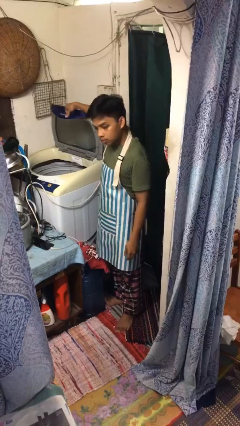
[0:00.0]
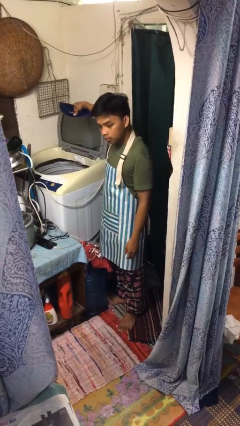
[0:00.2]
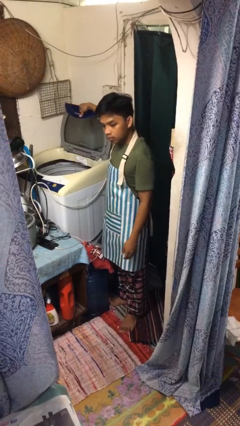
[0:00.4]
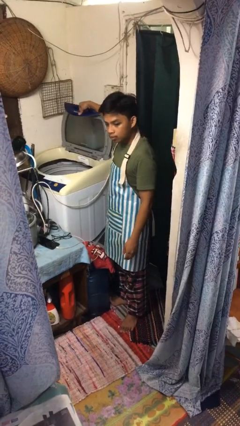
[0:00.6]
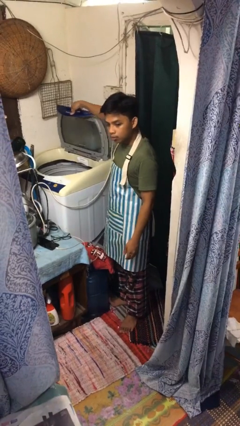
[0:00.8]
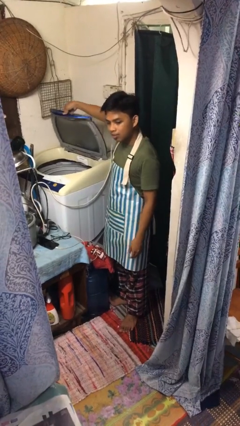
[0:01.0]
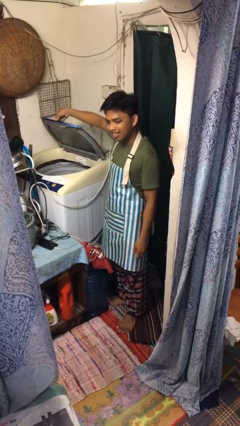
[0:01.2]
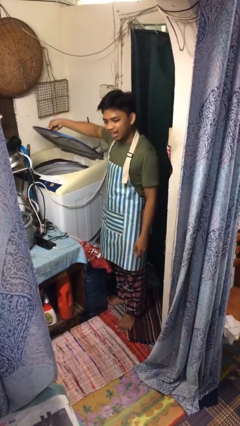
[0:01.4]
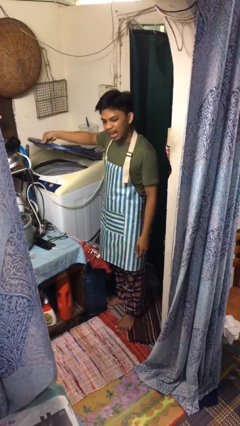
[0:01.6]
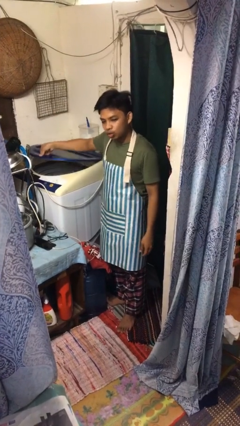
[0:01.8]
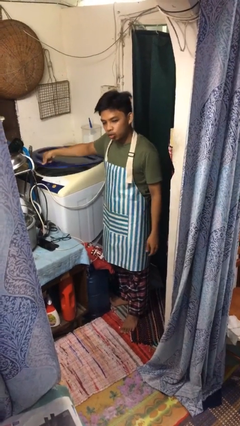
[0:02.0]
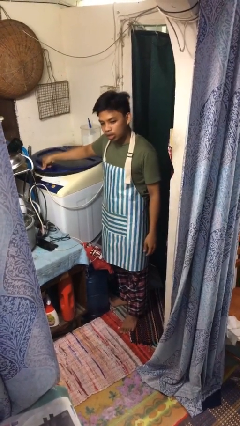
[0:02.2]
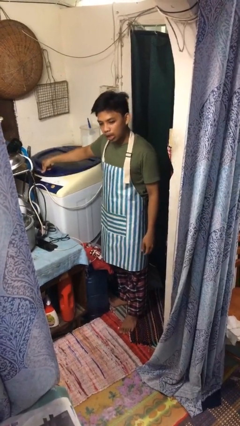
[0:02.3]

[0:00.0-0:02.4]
person closes clothes washer

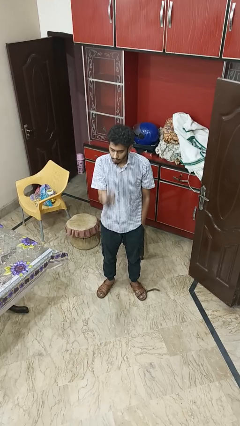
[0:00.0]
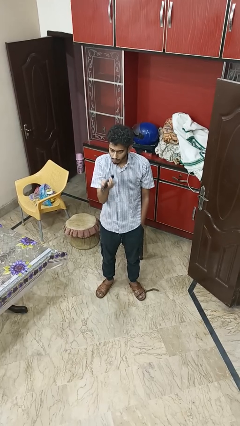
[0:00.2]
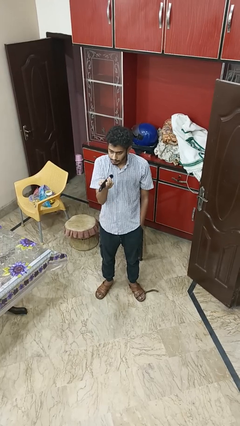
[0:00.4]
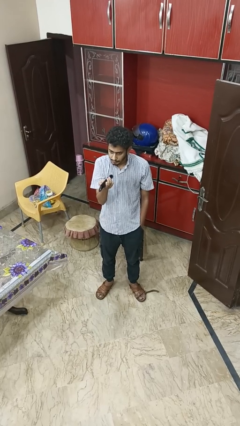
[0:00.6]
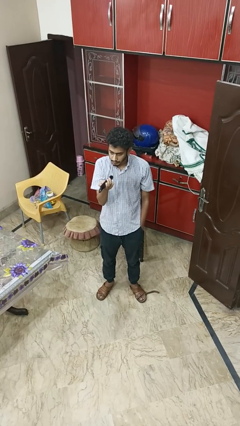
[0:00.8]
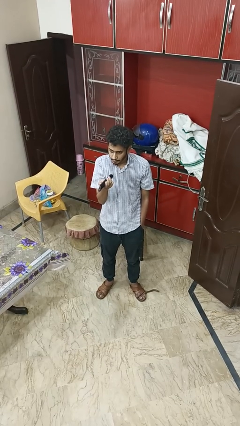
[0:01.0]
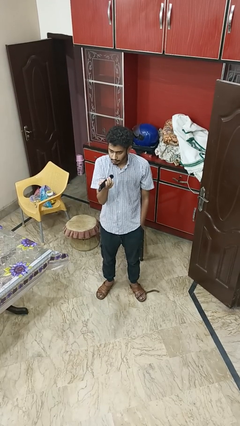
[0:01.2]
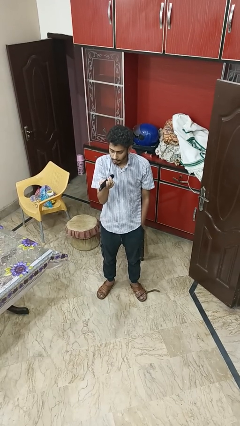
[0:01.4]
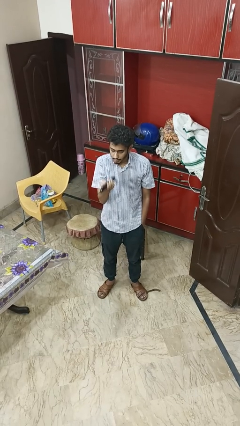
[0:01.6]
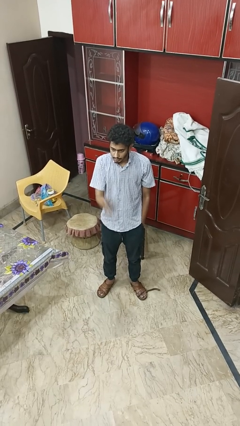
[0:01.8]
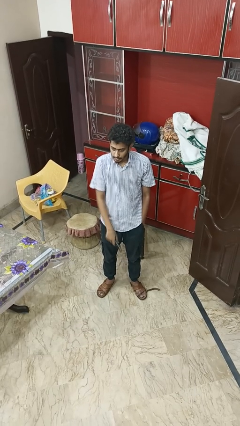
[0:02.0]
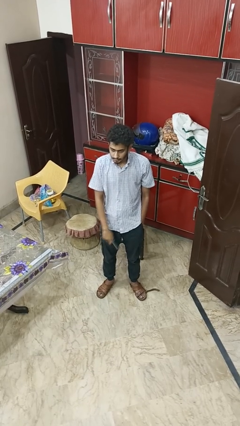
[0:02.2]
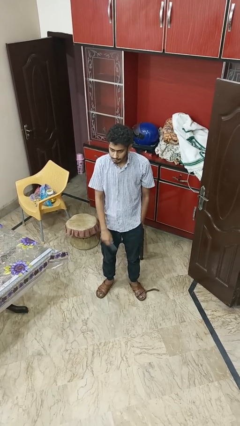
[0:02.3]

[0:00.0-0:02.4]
person uses television remote

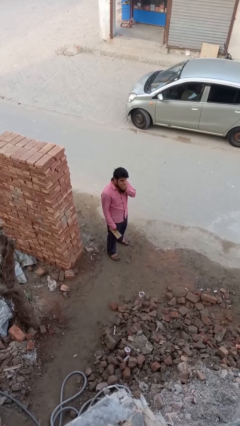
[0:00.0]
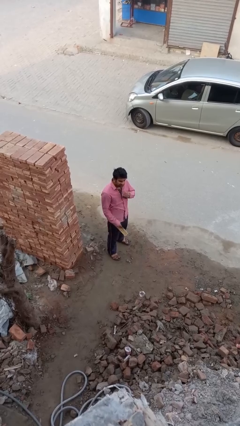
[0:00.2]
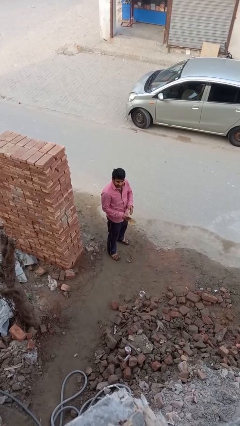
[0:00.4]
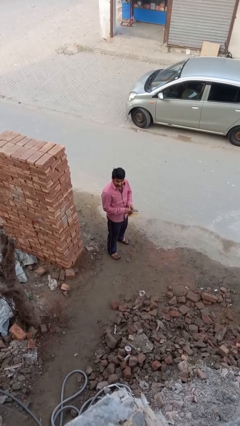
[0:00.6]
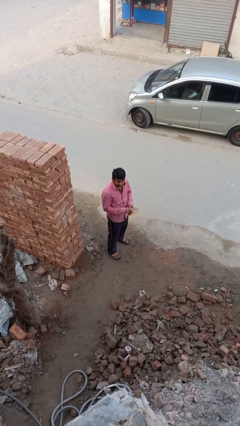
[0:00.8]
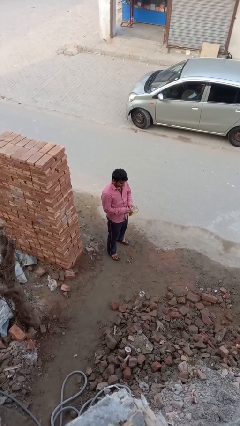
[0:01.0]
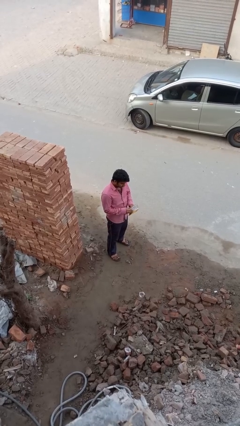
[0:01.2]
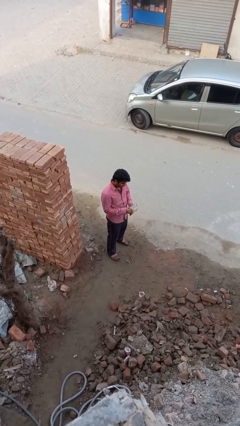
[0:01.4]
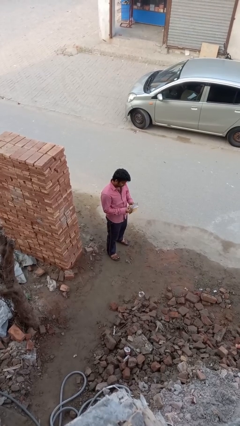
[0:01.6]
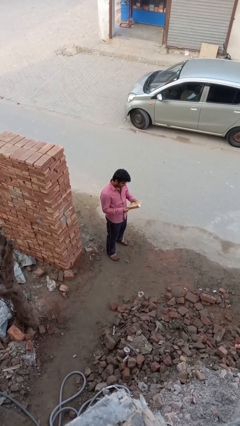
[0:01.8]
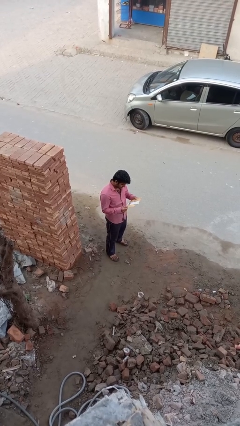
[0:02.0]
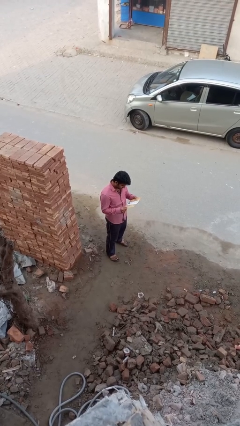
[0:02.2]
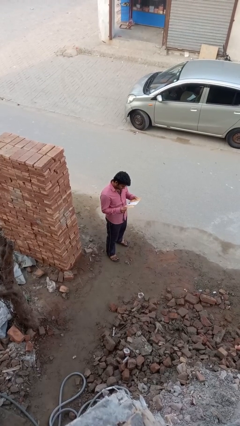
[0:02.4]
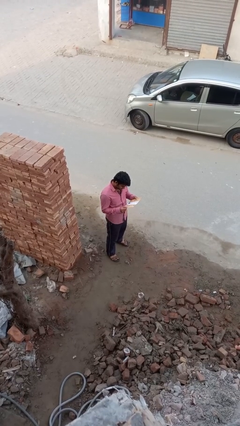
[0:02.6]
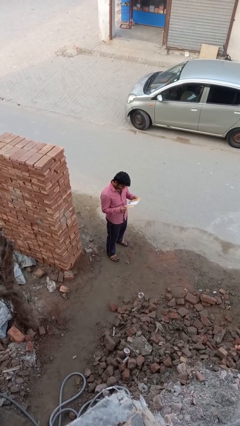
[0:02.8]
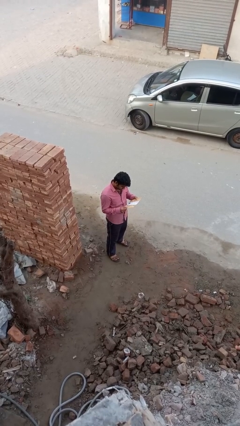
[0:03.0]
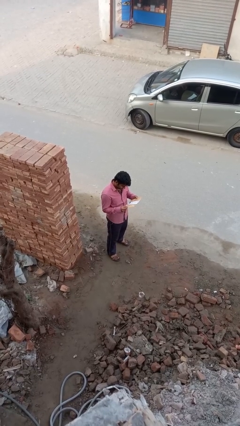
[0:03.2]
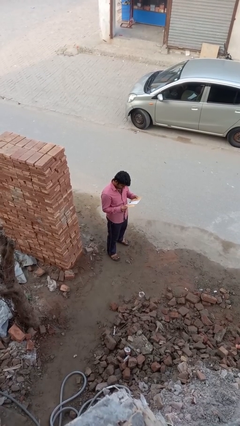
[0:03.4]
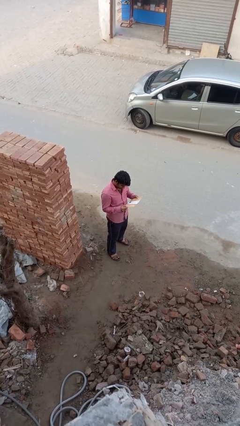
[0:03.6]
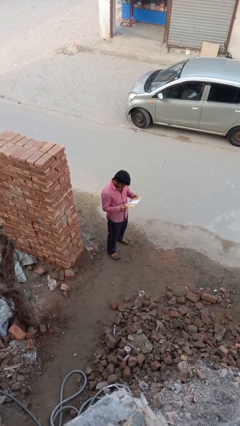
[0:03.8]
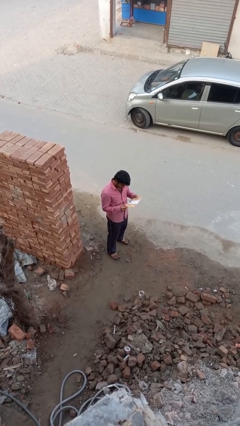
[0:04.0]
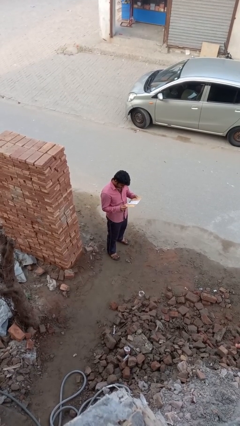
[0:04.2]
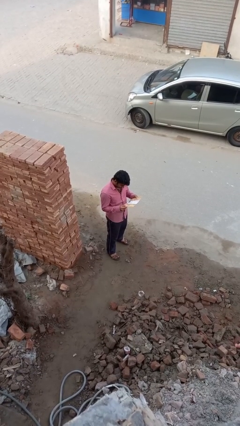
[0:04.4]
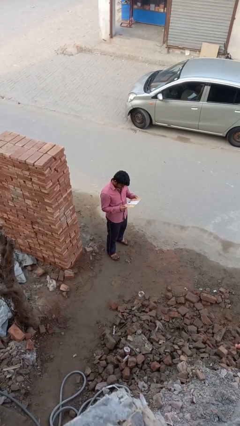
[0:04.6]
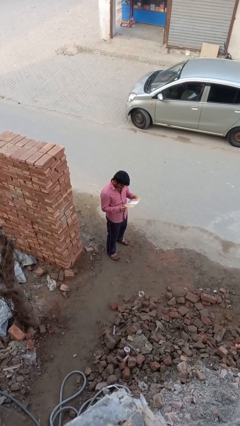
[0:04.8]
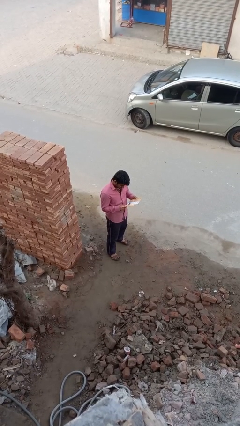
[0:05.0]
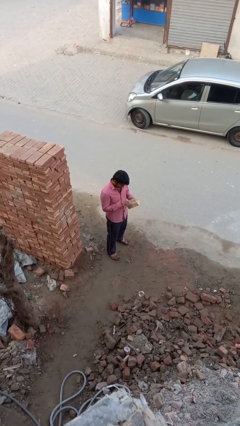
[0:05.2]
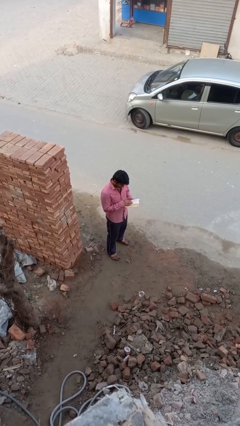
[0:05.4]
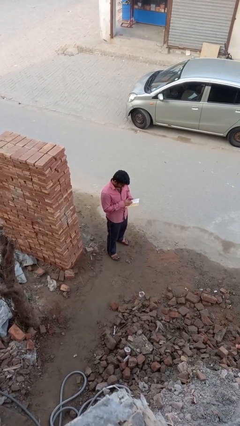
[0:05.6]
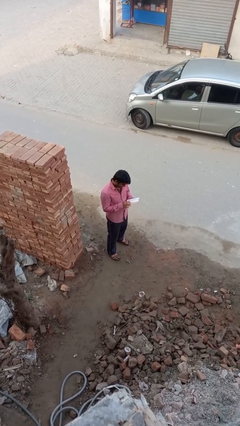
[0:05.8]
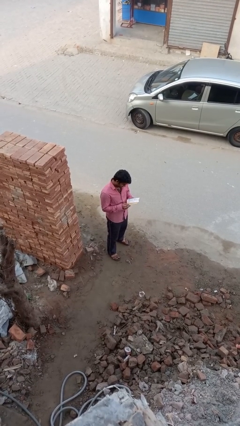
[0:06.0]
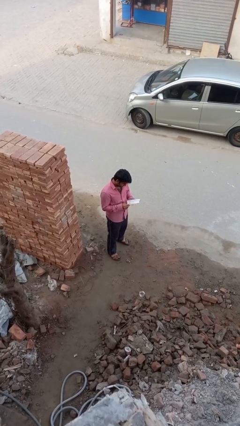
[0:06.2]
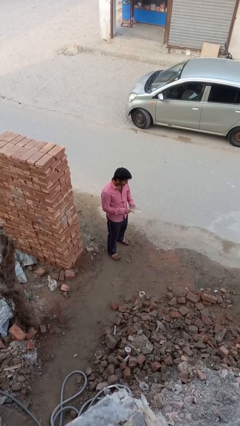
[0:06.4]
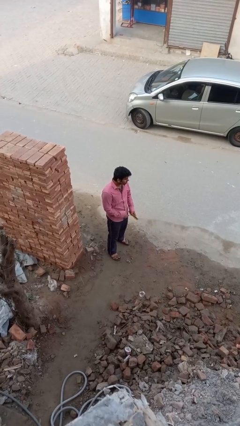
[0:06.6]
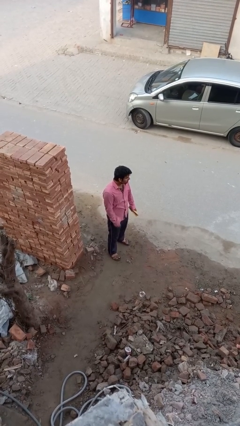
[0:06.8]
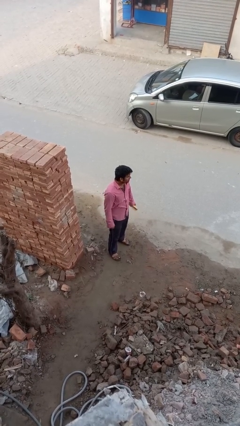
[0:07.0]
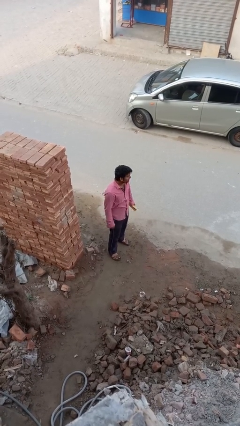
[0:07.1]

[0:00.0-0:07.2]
person reads document

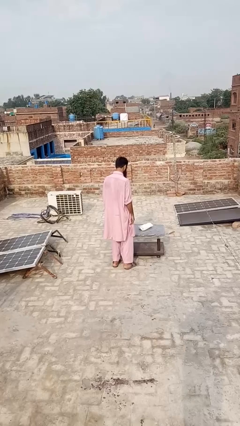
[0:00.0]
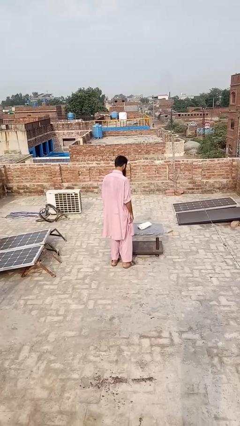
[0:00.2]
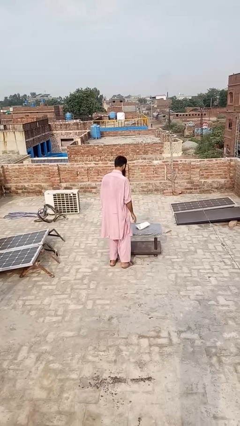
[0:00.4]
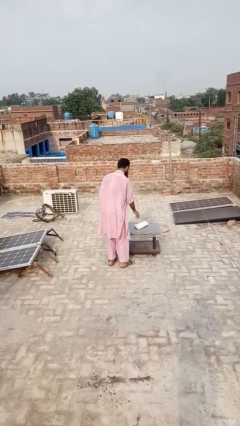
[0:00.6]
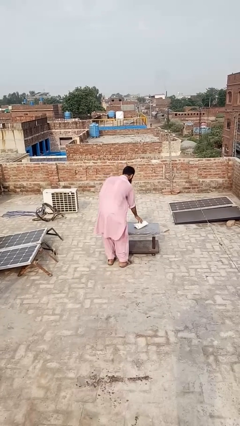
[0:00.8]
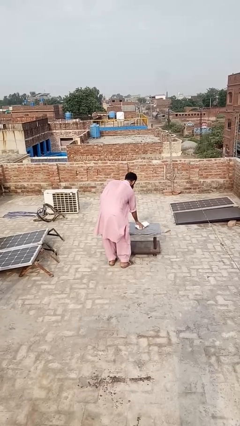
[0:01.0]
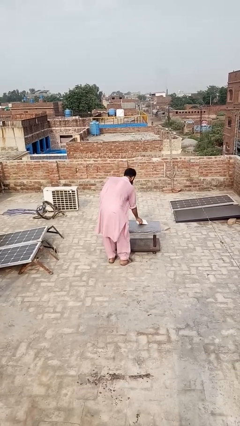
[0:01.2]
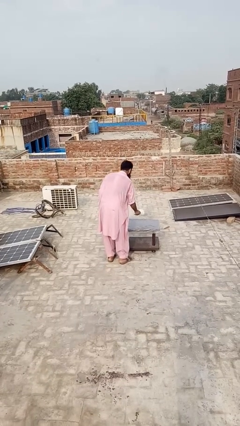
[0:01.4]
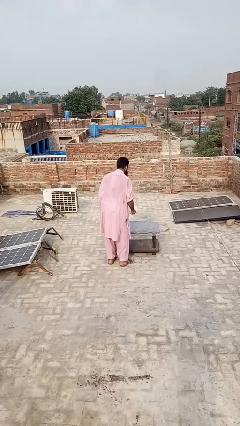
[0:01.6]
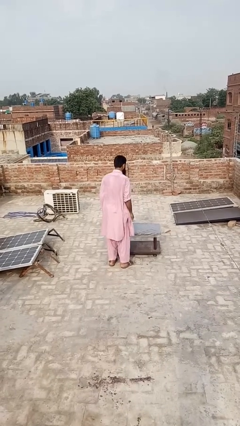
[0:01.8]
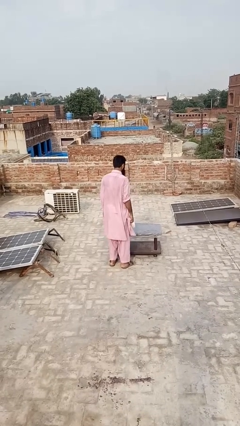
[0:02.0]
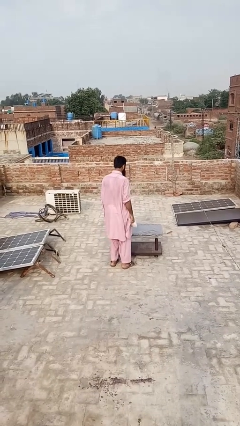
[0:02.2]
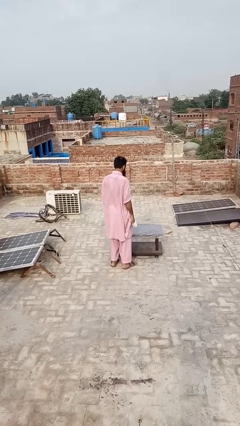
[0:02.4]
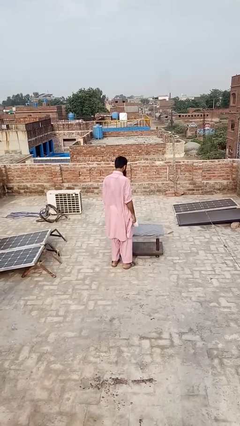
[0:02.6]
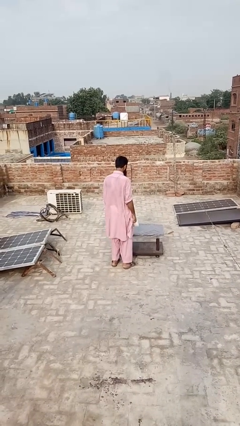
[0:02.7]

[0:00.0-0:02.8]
person picks up object from table

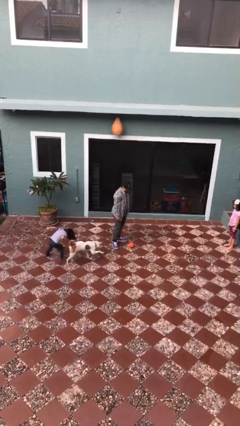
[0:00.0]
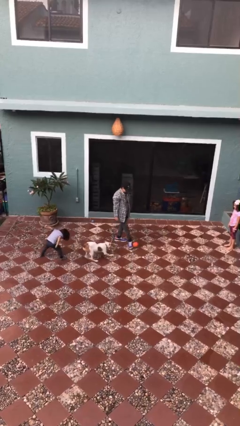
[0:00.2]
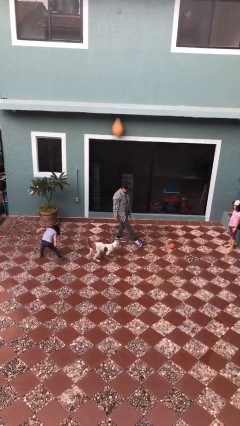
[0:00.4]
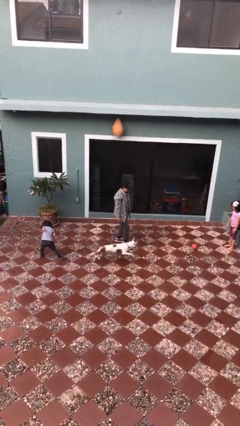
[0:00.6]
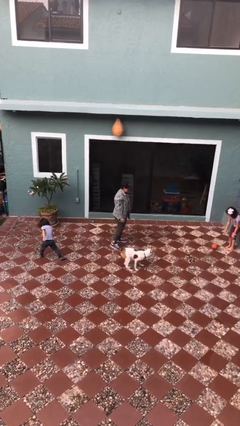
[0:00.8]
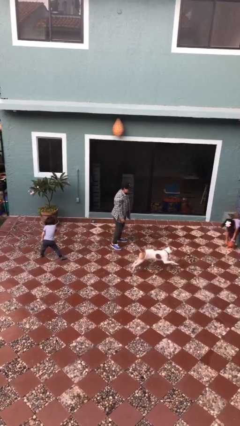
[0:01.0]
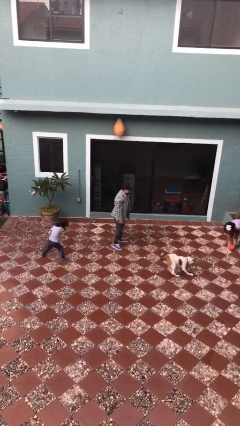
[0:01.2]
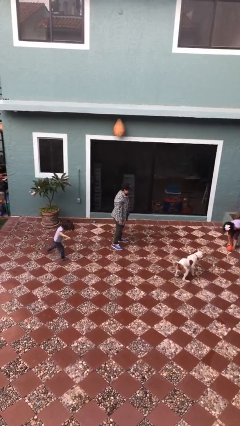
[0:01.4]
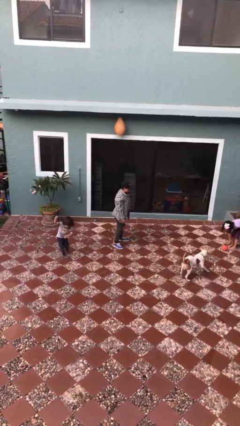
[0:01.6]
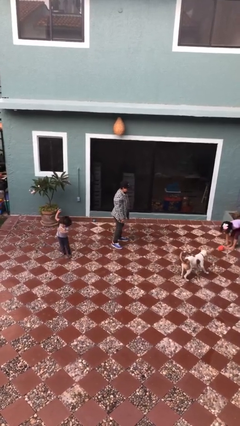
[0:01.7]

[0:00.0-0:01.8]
person kicks object to person

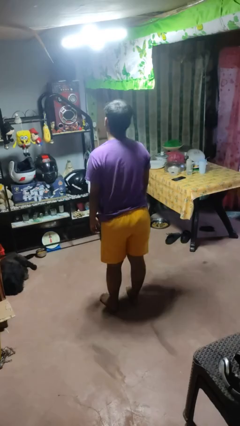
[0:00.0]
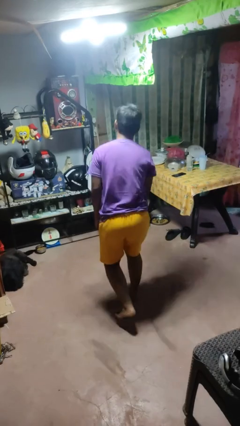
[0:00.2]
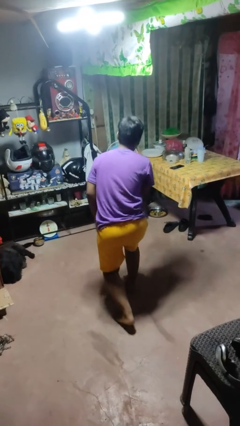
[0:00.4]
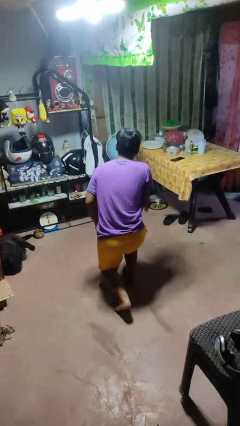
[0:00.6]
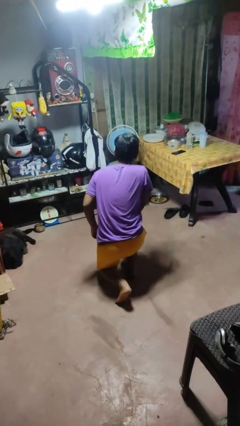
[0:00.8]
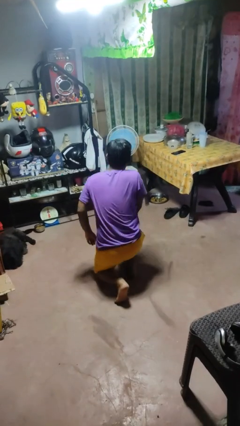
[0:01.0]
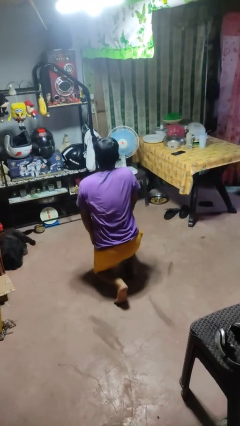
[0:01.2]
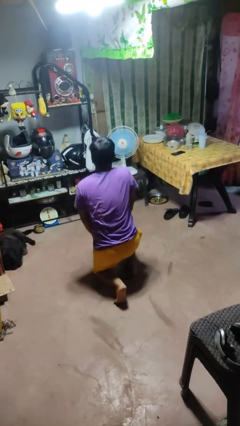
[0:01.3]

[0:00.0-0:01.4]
person kneels
